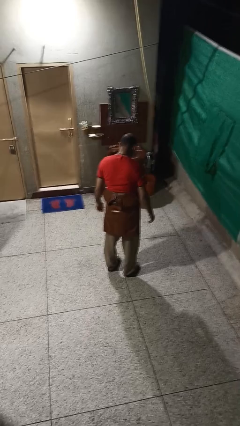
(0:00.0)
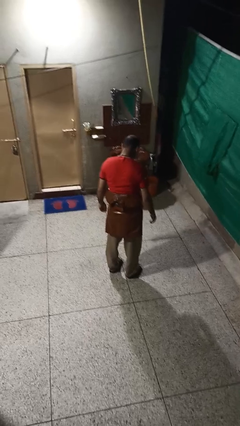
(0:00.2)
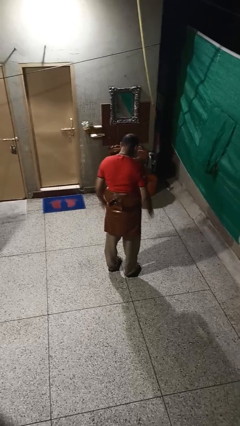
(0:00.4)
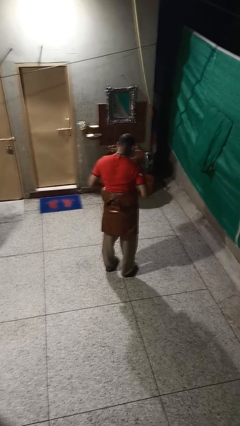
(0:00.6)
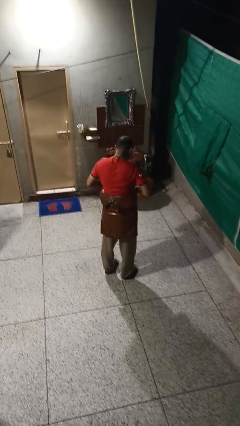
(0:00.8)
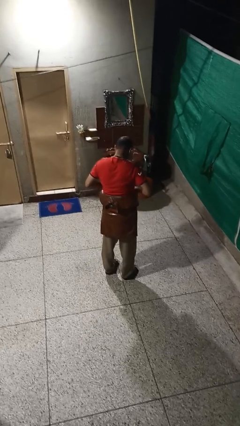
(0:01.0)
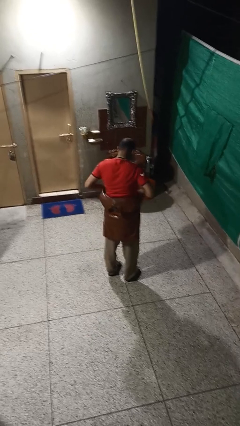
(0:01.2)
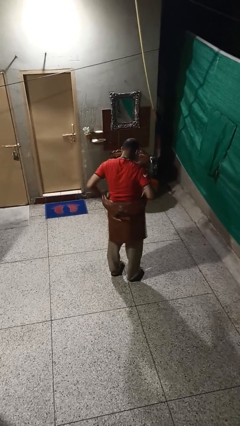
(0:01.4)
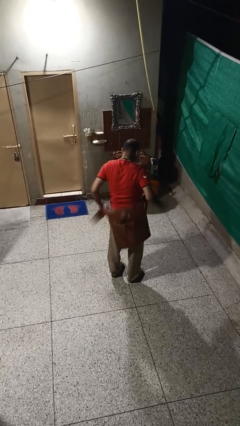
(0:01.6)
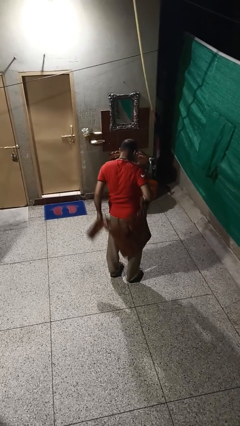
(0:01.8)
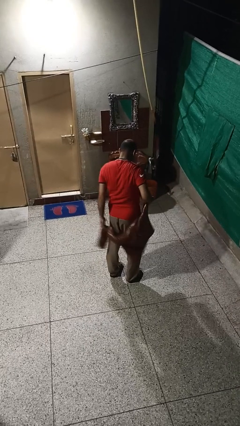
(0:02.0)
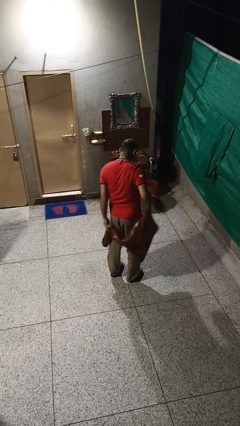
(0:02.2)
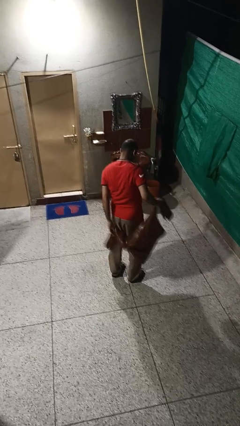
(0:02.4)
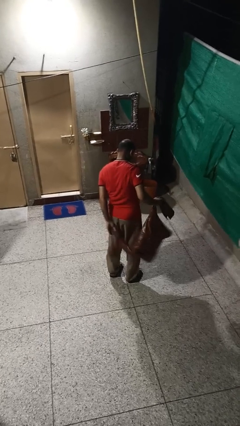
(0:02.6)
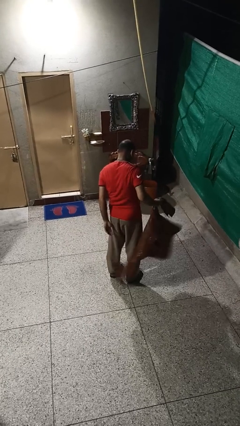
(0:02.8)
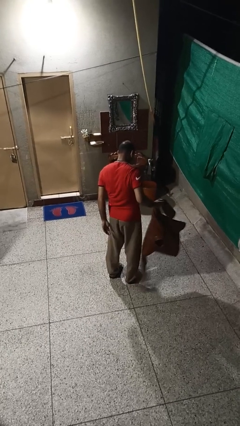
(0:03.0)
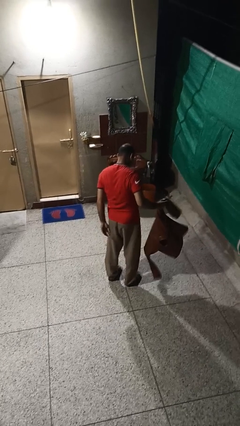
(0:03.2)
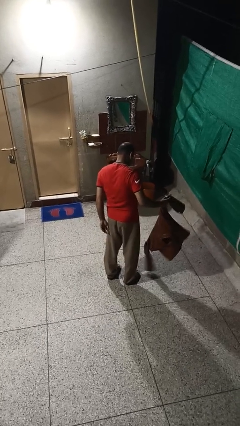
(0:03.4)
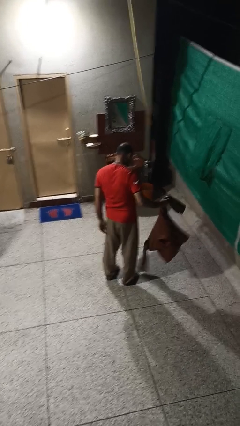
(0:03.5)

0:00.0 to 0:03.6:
person unties jacket around waist

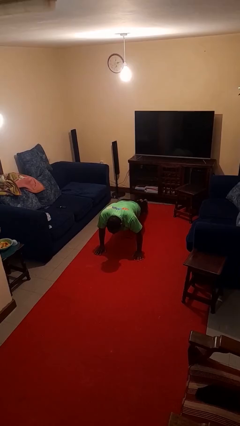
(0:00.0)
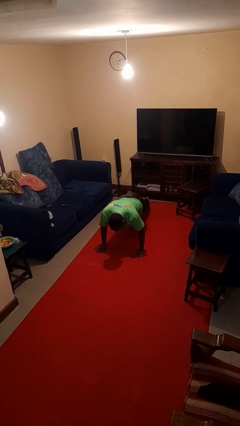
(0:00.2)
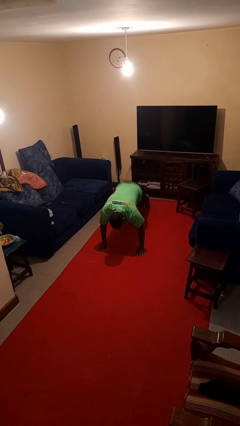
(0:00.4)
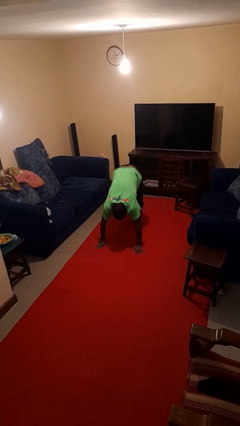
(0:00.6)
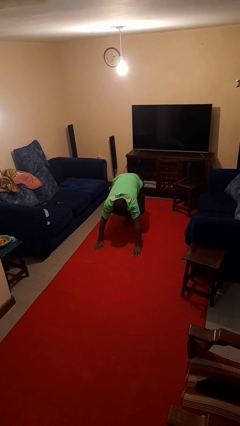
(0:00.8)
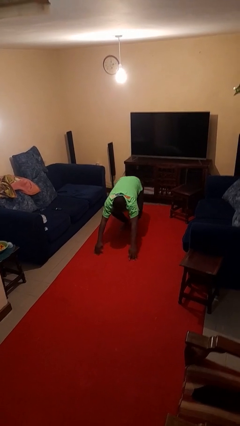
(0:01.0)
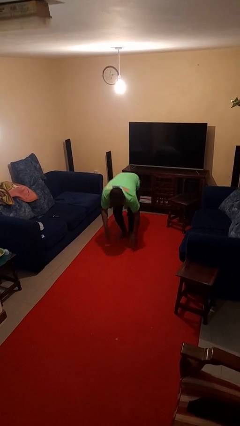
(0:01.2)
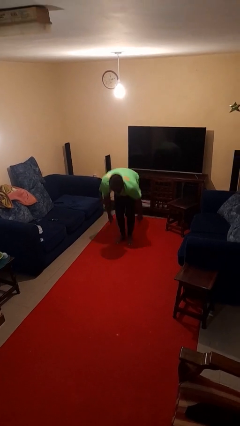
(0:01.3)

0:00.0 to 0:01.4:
person stands up from floor

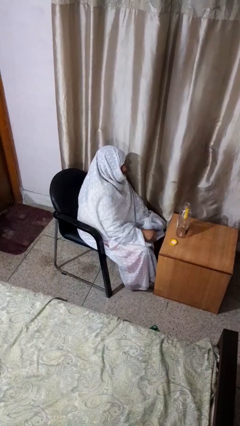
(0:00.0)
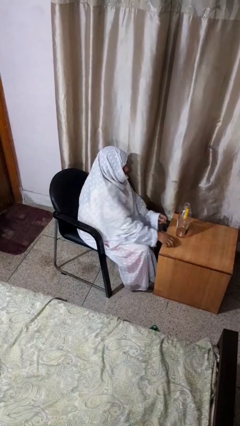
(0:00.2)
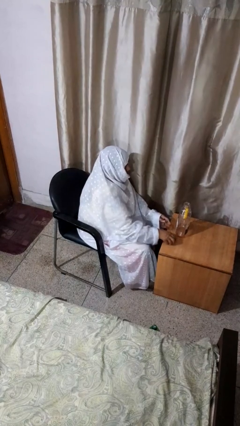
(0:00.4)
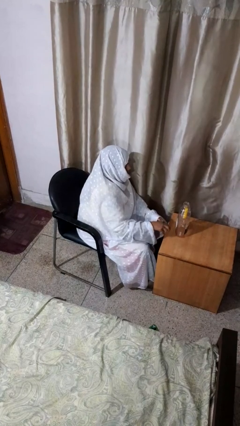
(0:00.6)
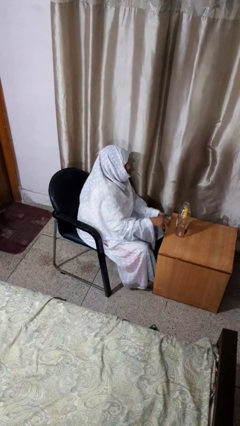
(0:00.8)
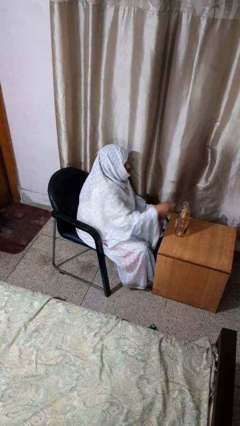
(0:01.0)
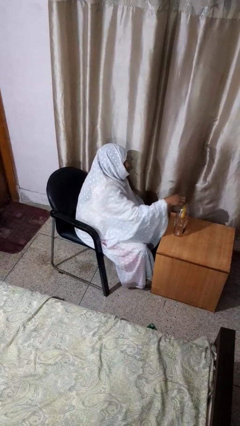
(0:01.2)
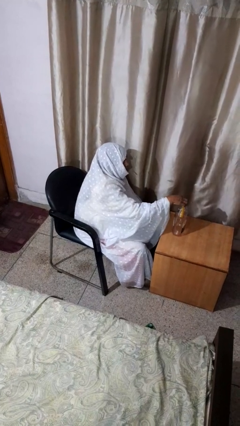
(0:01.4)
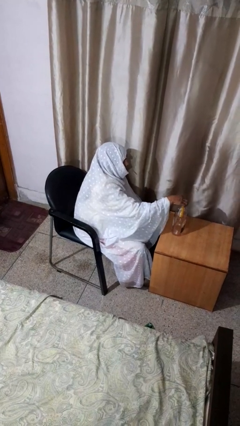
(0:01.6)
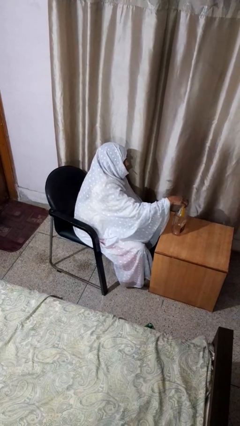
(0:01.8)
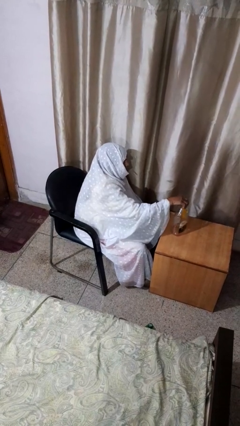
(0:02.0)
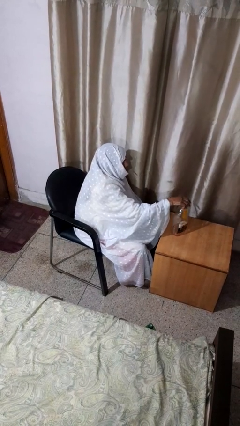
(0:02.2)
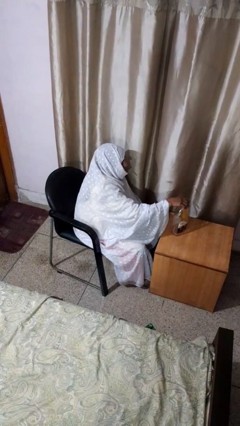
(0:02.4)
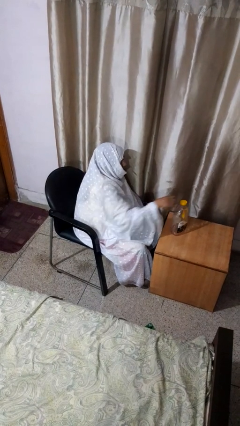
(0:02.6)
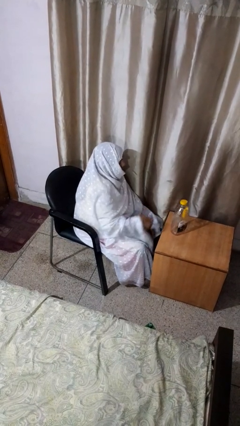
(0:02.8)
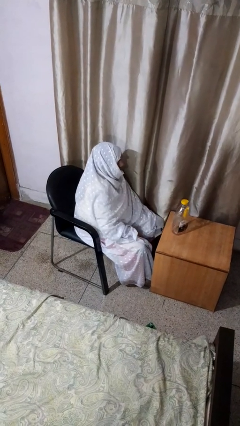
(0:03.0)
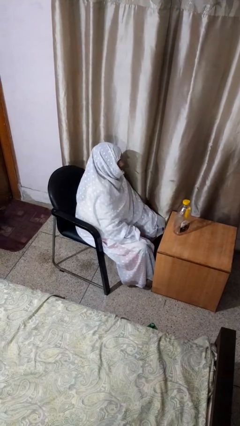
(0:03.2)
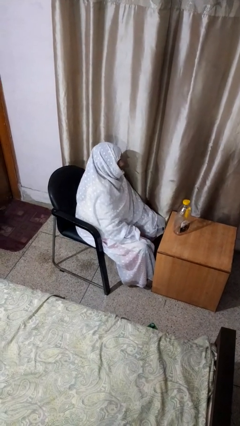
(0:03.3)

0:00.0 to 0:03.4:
person screws lid to bottle

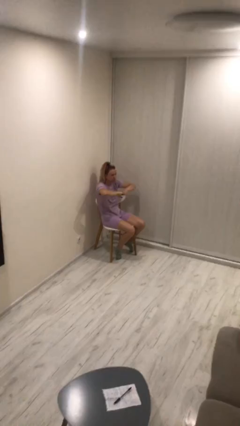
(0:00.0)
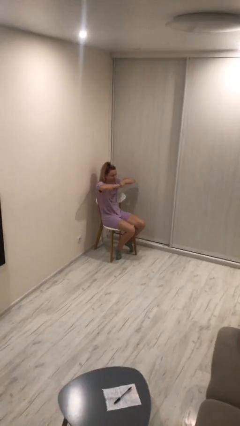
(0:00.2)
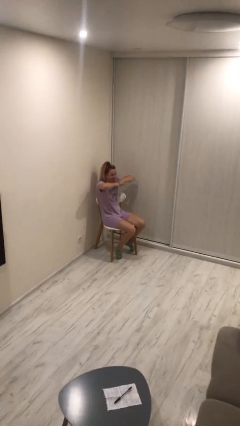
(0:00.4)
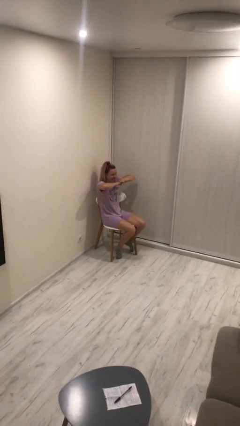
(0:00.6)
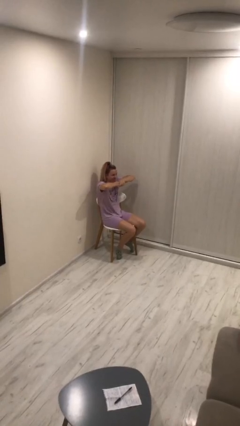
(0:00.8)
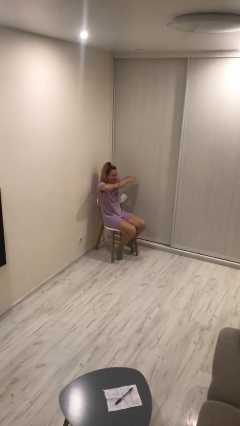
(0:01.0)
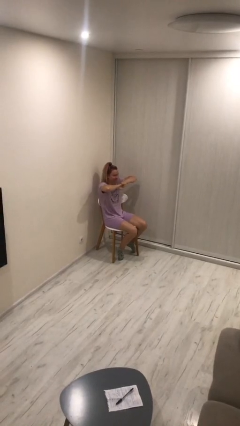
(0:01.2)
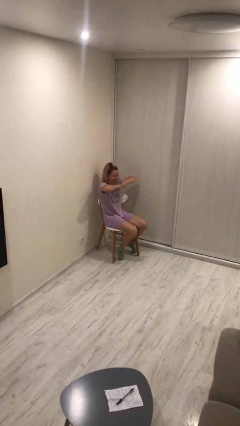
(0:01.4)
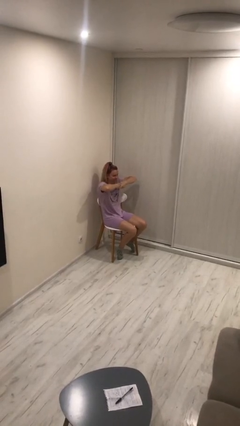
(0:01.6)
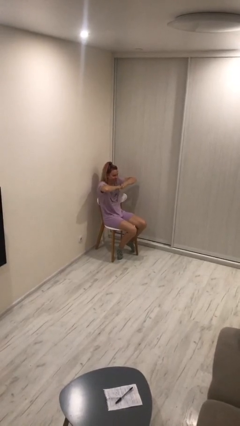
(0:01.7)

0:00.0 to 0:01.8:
person cracks knuckles

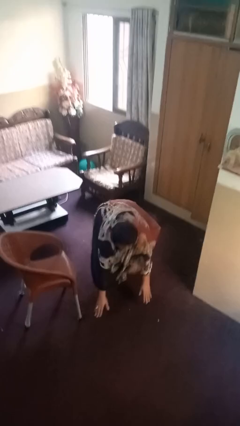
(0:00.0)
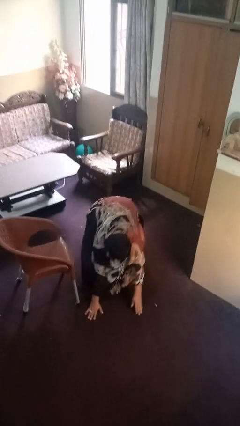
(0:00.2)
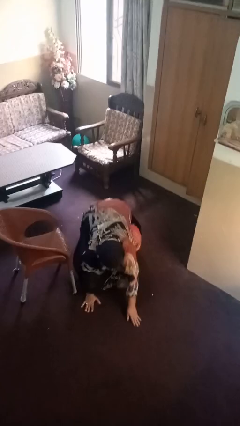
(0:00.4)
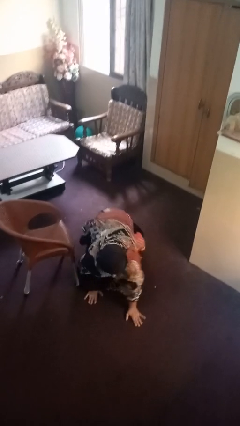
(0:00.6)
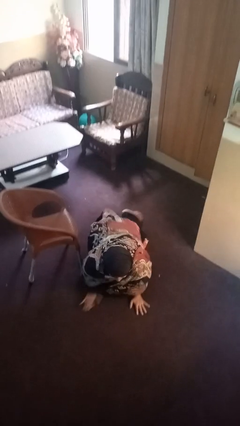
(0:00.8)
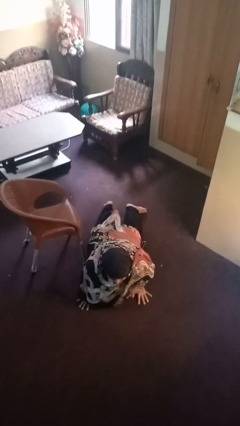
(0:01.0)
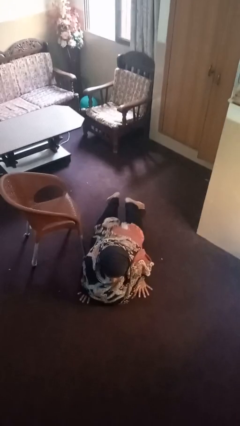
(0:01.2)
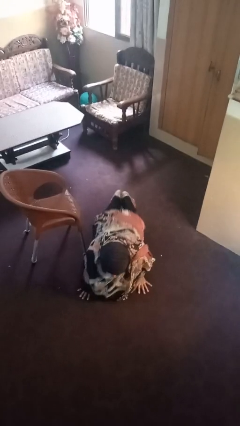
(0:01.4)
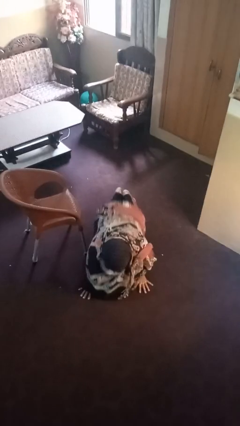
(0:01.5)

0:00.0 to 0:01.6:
person lies down on floor

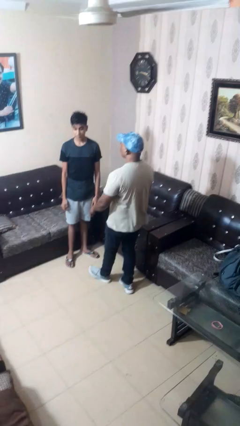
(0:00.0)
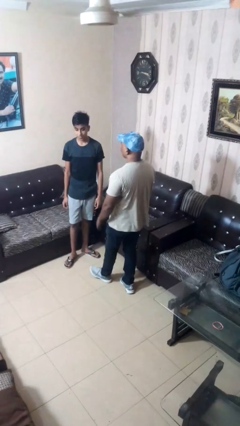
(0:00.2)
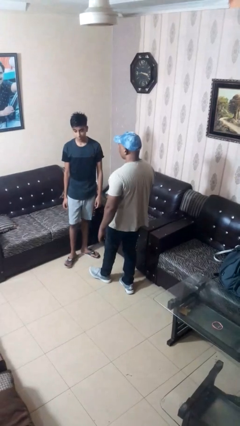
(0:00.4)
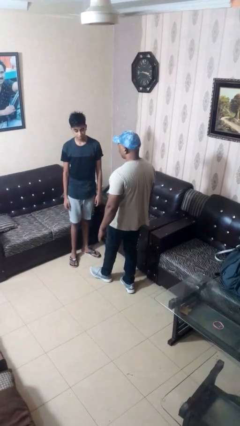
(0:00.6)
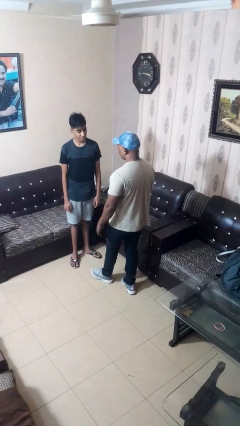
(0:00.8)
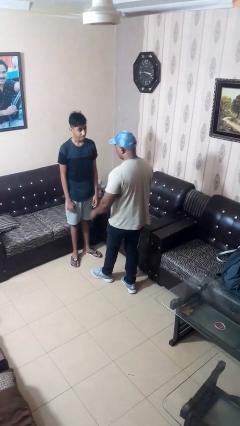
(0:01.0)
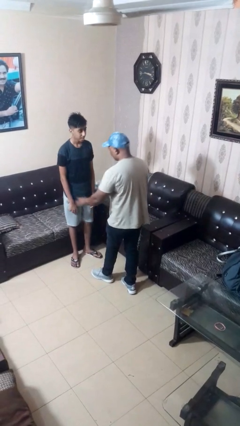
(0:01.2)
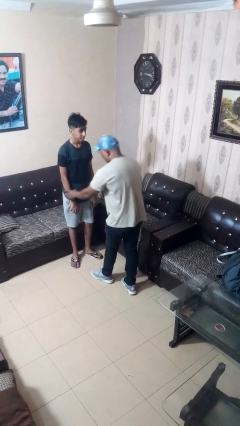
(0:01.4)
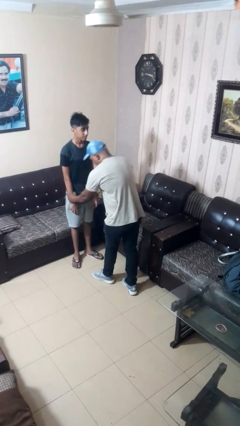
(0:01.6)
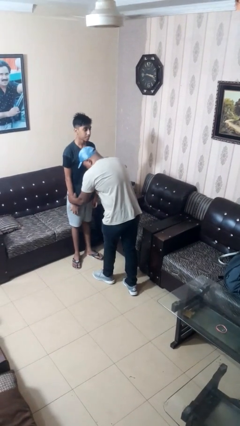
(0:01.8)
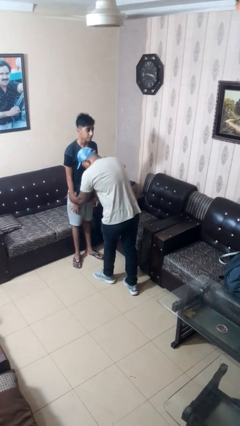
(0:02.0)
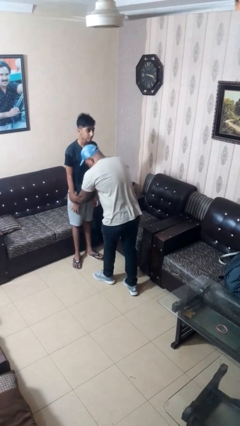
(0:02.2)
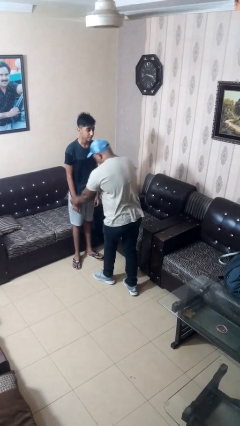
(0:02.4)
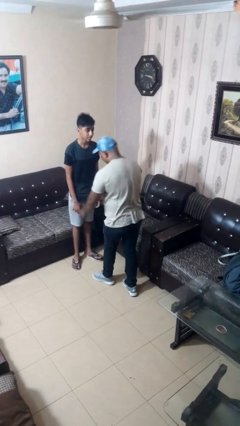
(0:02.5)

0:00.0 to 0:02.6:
person grabs person by forearm

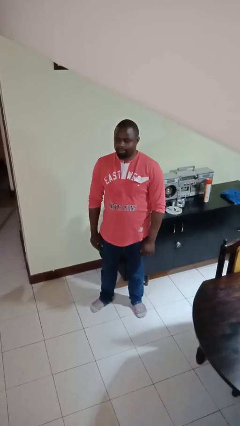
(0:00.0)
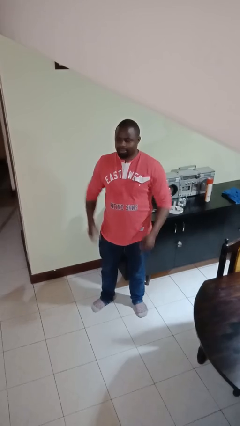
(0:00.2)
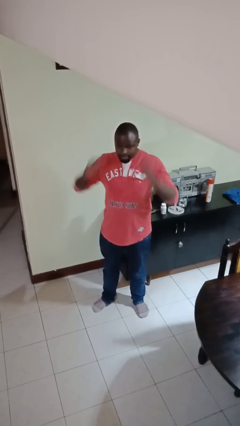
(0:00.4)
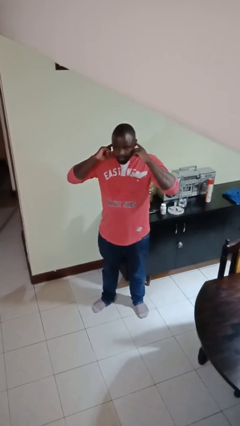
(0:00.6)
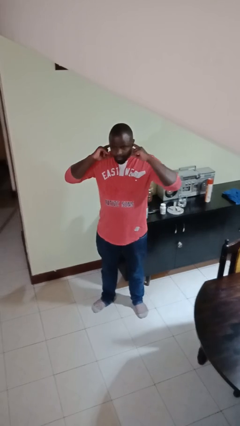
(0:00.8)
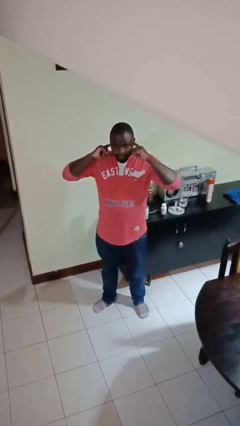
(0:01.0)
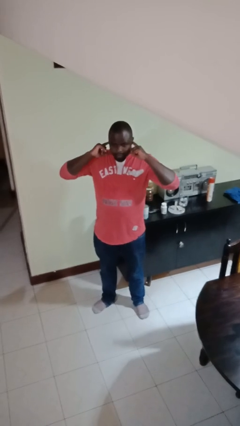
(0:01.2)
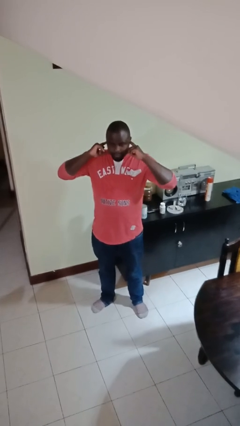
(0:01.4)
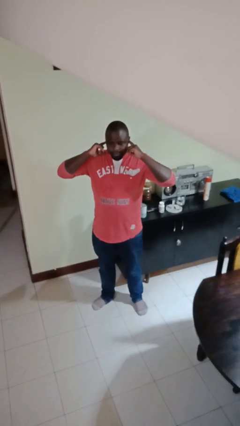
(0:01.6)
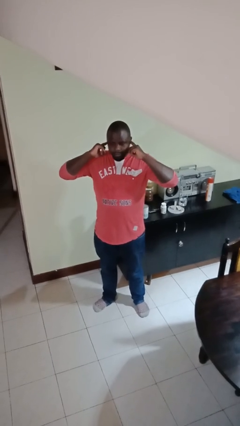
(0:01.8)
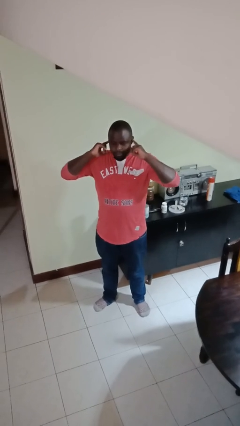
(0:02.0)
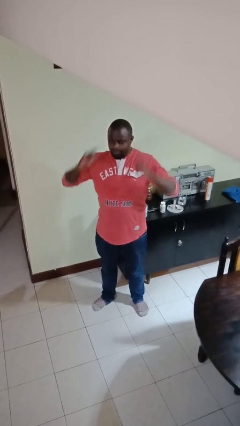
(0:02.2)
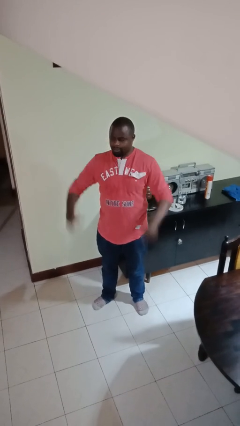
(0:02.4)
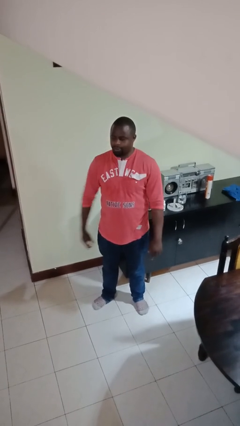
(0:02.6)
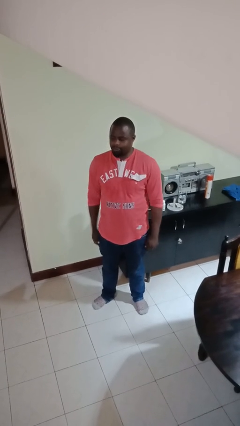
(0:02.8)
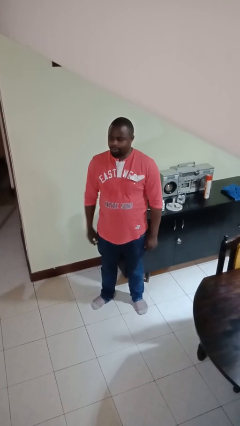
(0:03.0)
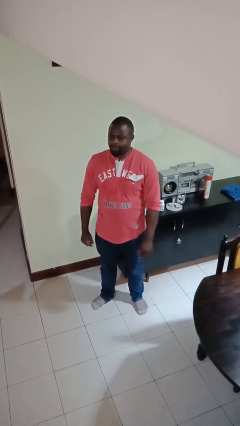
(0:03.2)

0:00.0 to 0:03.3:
person puts fingers in ear
